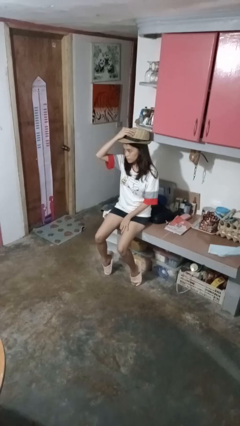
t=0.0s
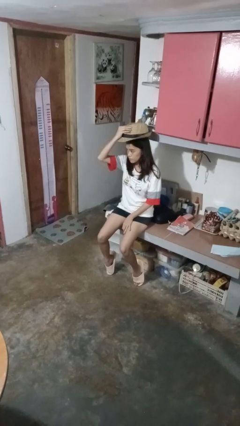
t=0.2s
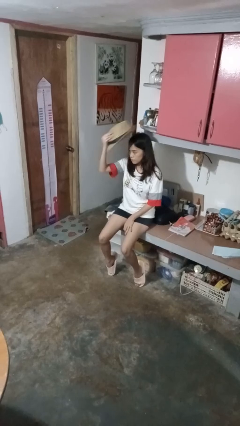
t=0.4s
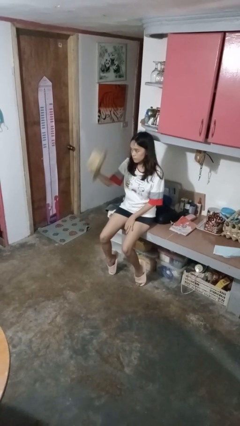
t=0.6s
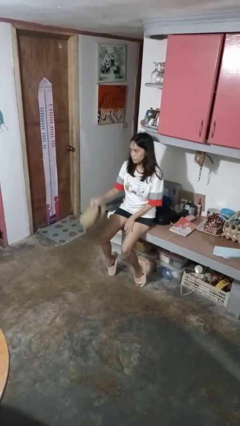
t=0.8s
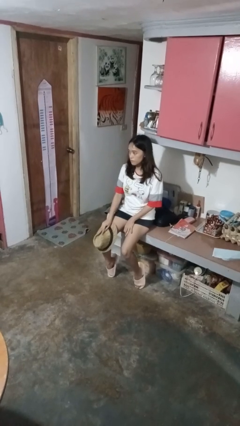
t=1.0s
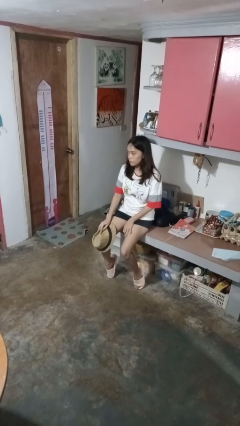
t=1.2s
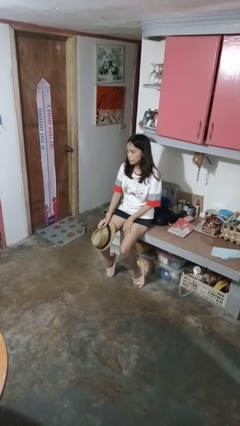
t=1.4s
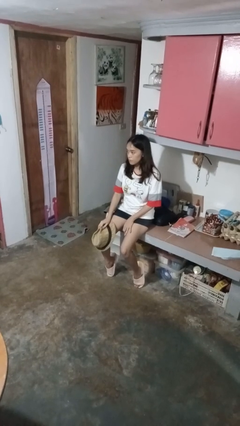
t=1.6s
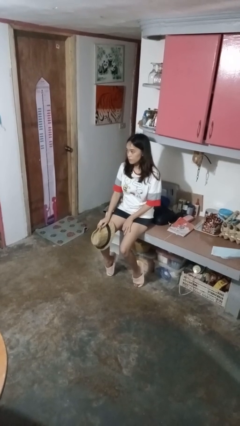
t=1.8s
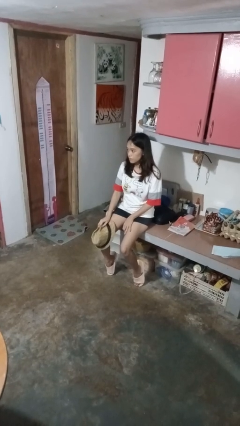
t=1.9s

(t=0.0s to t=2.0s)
person takes off hat

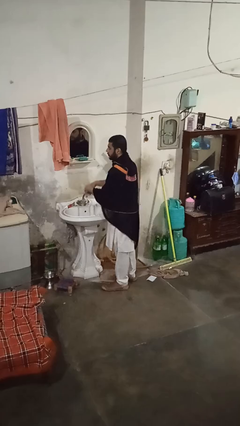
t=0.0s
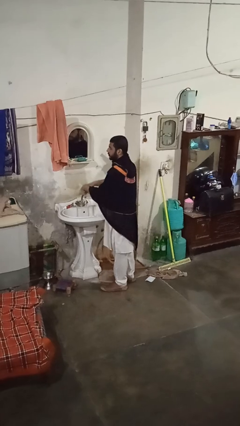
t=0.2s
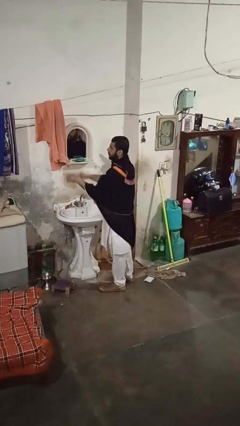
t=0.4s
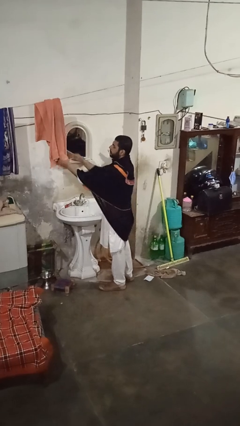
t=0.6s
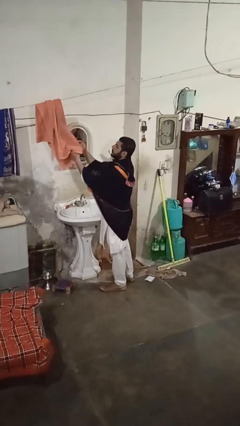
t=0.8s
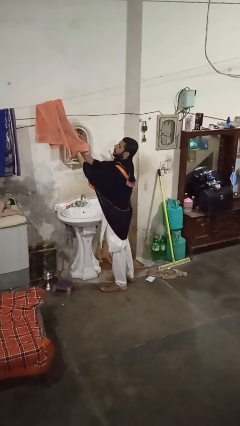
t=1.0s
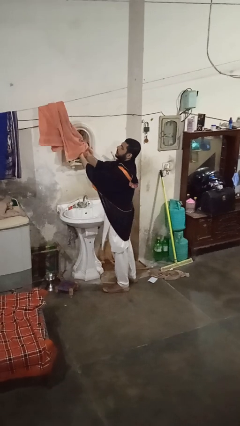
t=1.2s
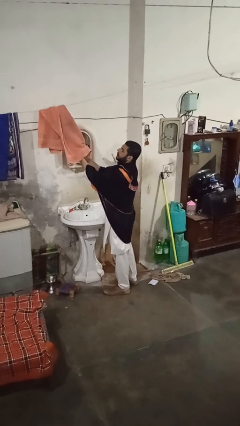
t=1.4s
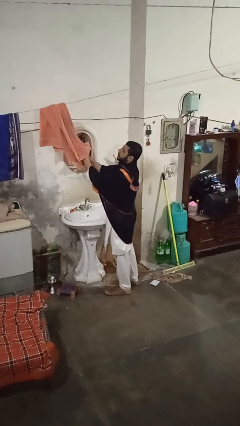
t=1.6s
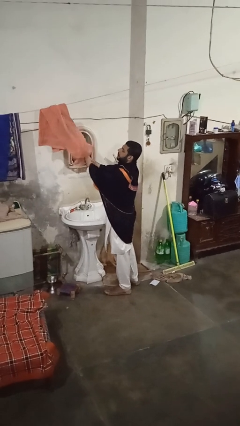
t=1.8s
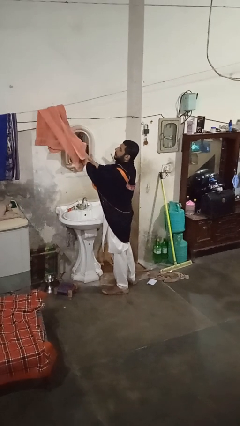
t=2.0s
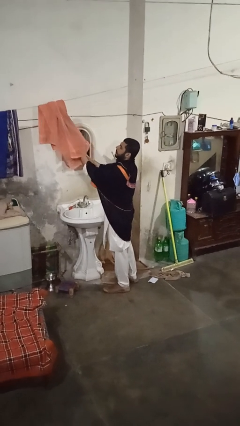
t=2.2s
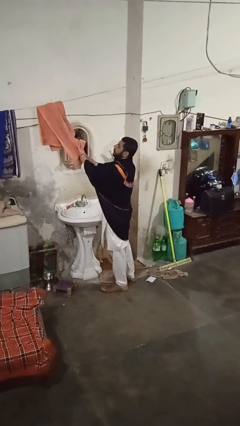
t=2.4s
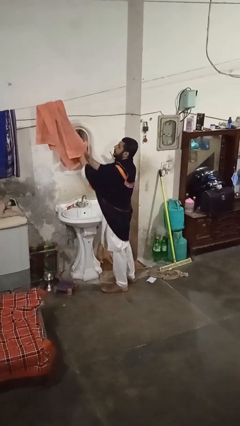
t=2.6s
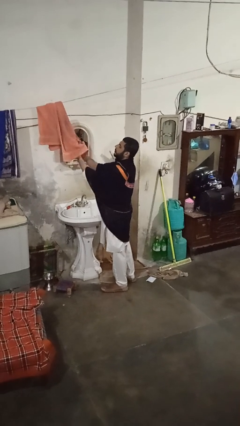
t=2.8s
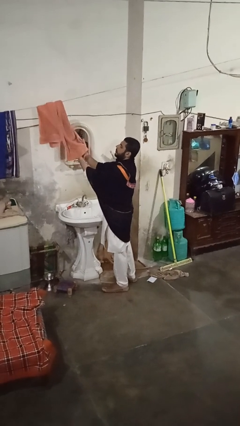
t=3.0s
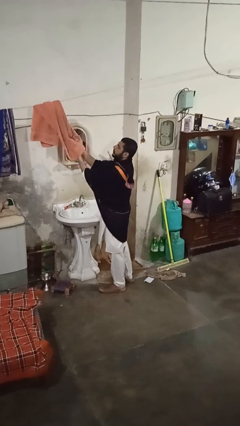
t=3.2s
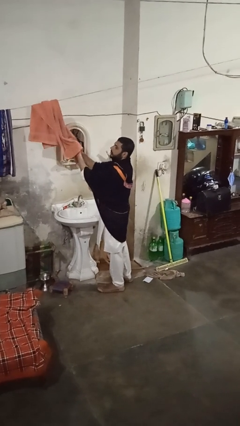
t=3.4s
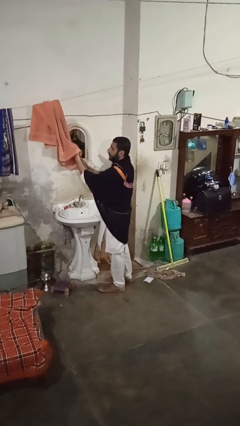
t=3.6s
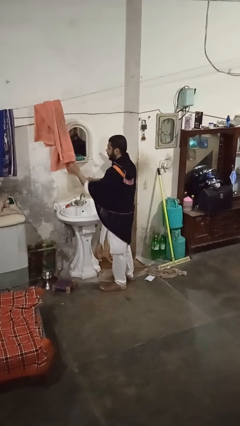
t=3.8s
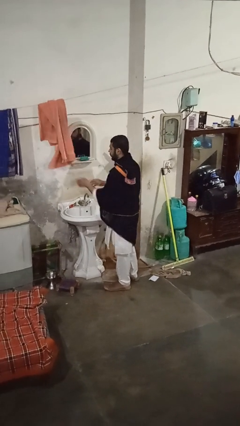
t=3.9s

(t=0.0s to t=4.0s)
person dries hands with towel

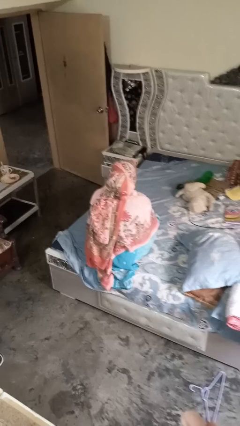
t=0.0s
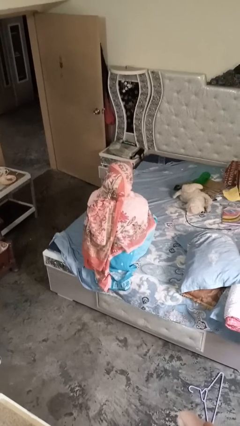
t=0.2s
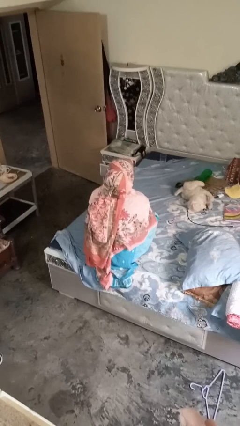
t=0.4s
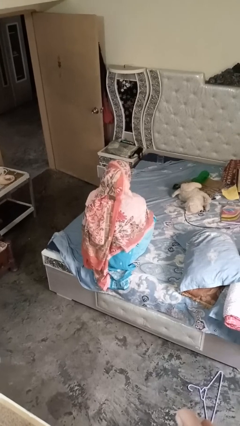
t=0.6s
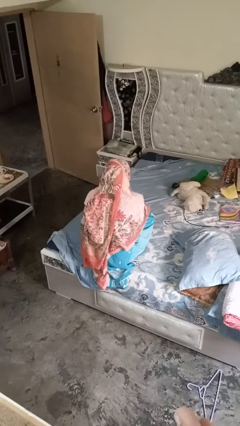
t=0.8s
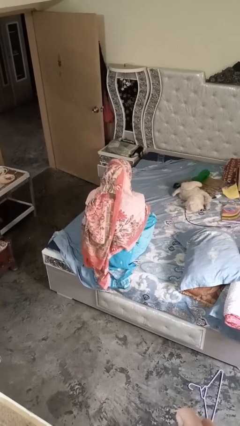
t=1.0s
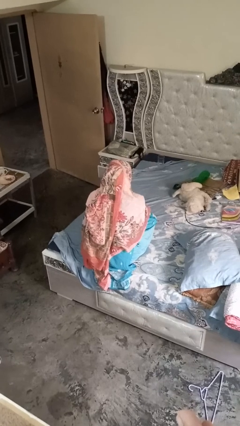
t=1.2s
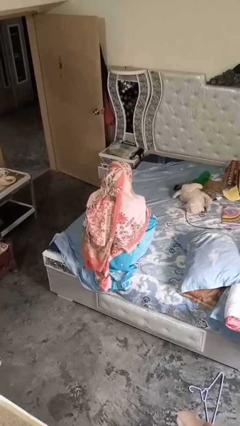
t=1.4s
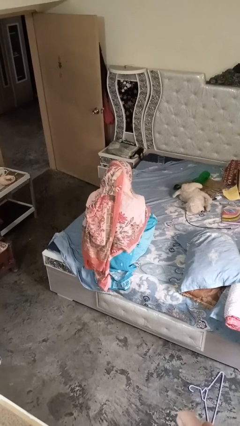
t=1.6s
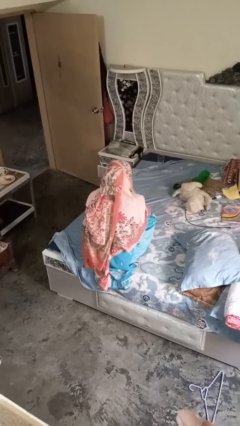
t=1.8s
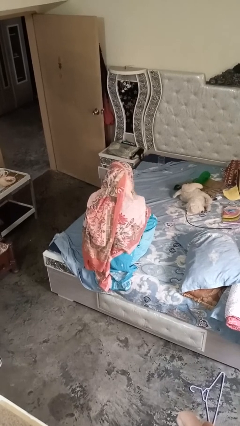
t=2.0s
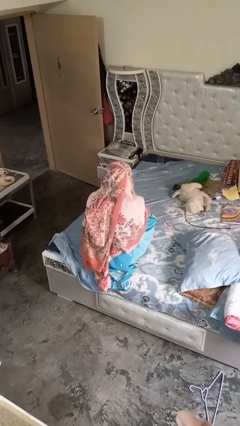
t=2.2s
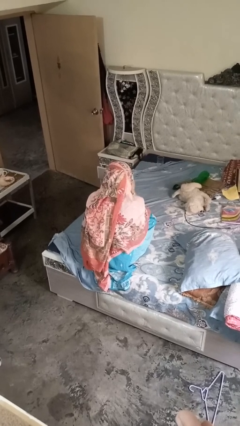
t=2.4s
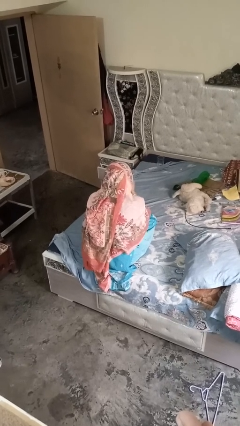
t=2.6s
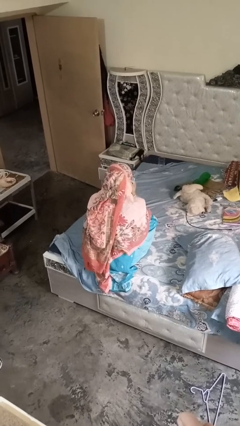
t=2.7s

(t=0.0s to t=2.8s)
person rubs foot

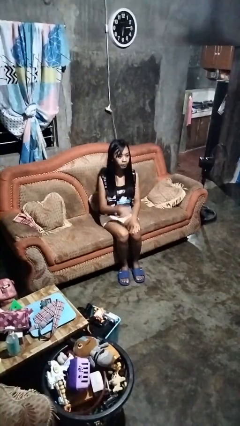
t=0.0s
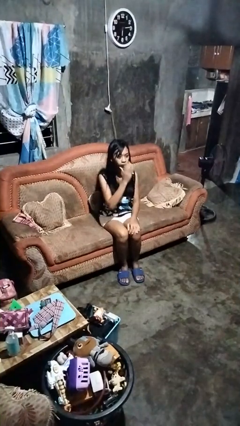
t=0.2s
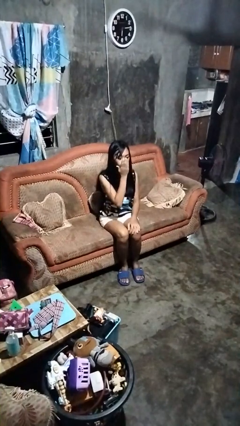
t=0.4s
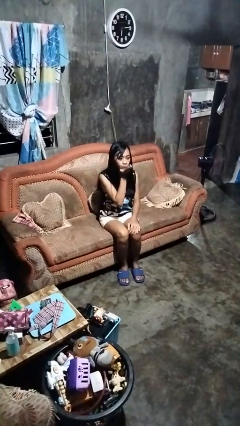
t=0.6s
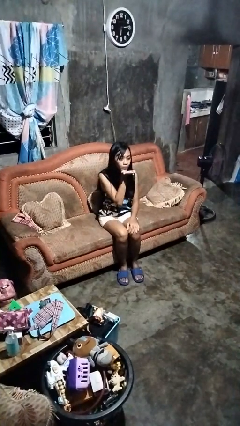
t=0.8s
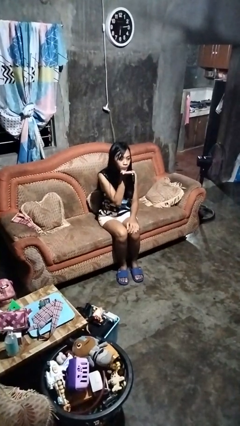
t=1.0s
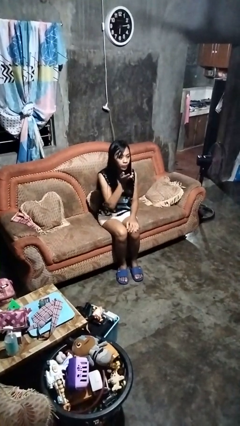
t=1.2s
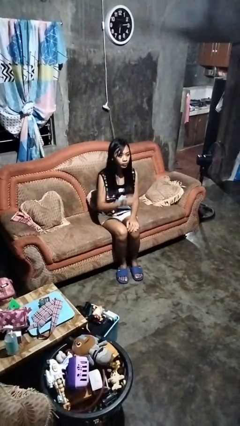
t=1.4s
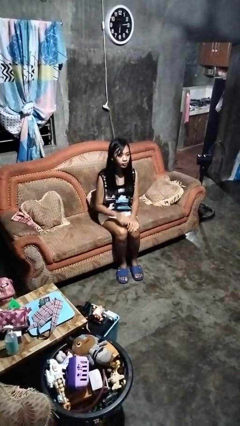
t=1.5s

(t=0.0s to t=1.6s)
person gestures blow kiss

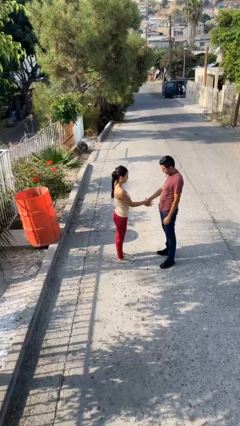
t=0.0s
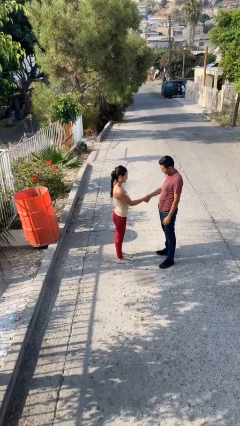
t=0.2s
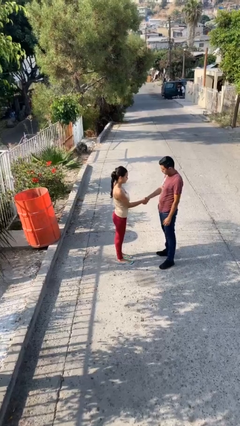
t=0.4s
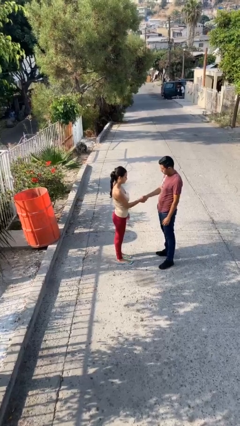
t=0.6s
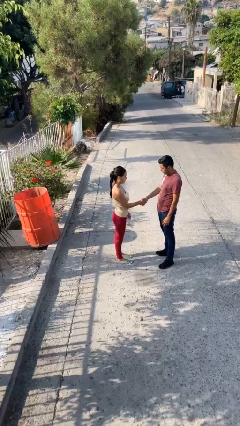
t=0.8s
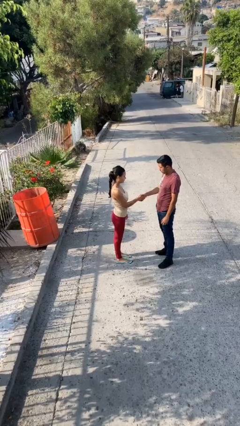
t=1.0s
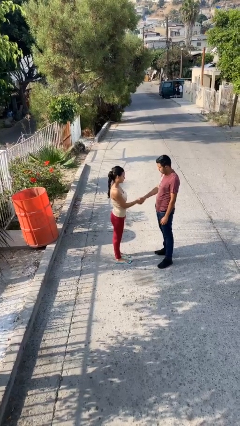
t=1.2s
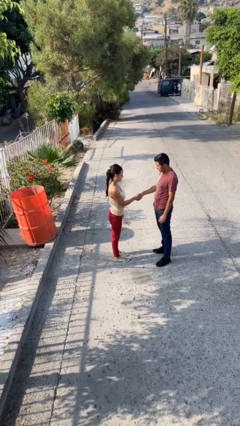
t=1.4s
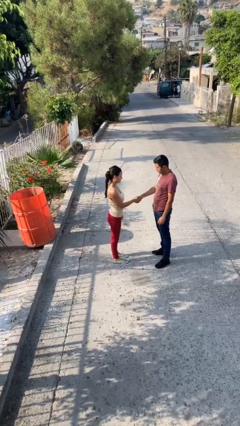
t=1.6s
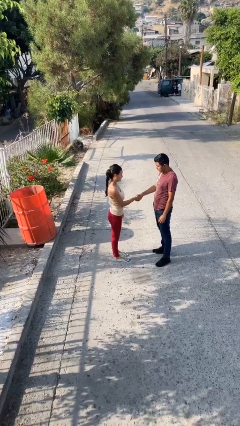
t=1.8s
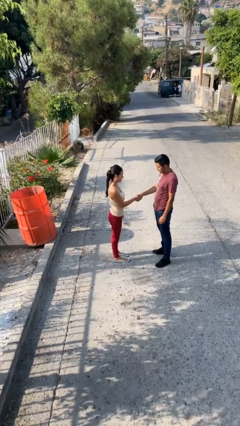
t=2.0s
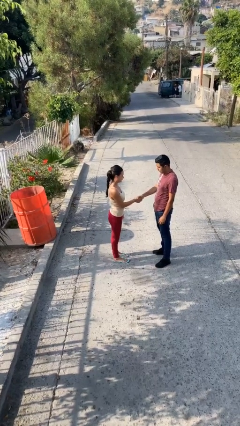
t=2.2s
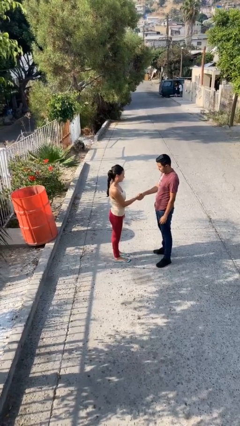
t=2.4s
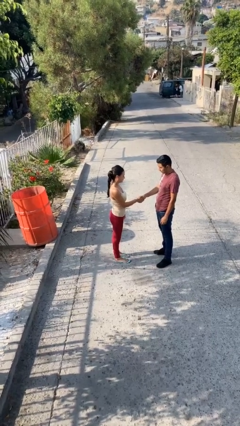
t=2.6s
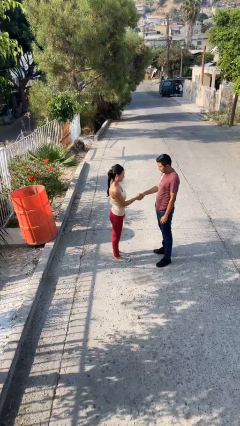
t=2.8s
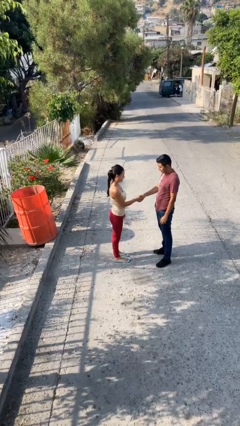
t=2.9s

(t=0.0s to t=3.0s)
person shakes hand

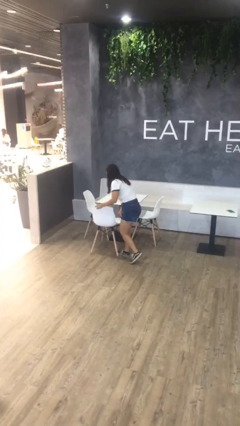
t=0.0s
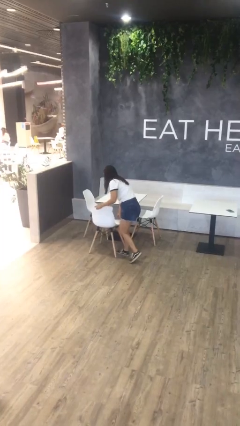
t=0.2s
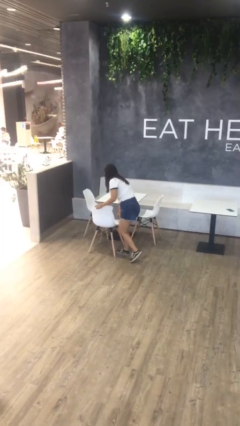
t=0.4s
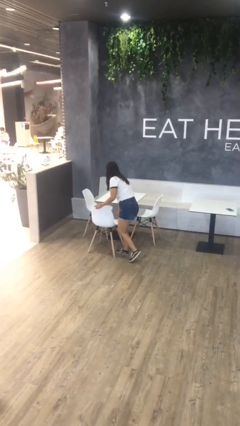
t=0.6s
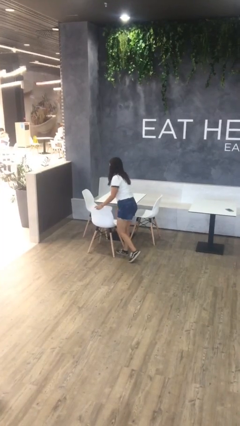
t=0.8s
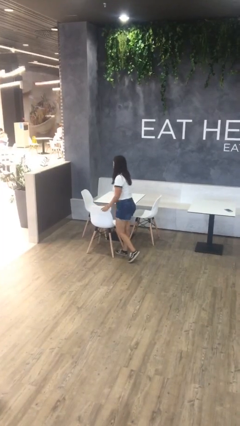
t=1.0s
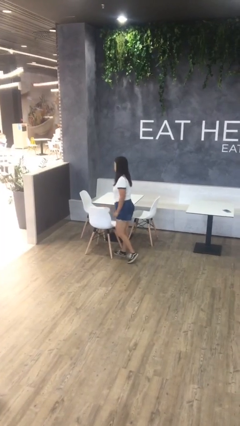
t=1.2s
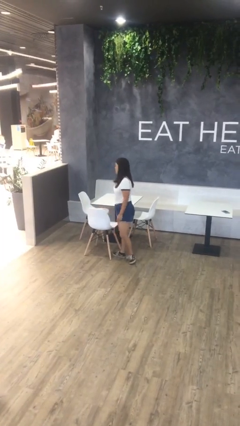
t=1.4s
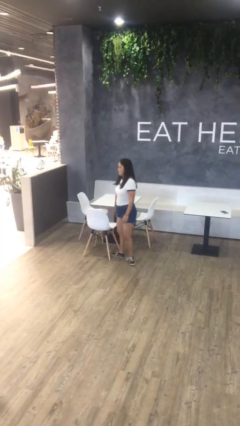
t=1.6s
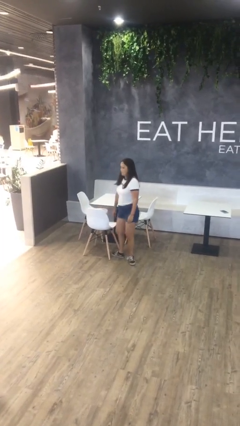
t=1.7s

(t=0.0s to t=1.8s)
person puts down object on floor

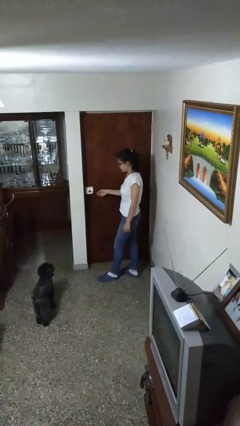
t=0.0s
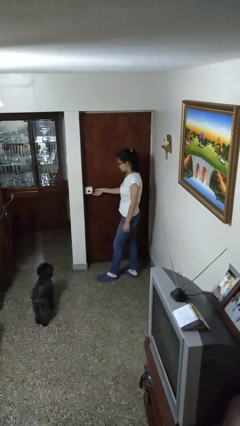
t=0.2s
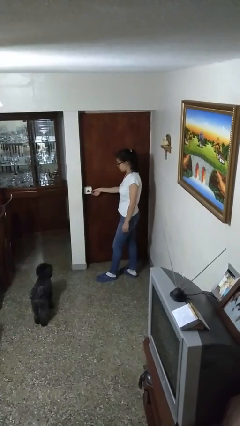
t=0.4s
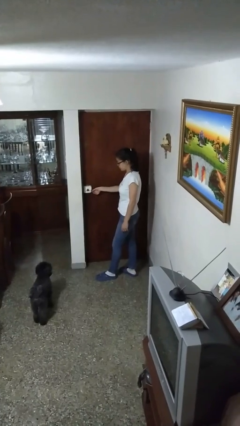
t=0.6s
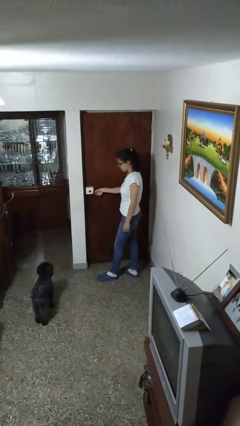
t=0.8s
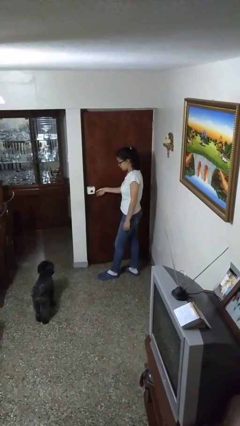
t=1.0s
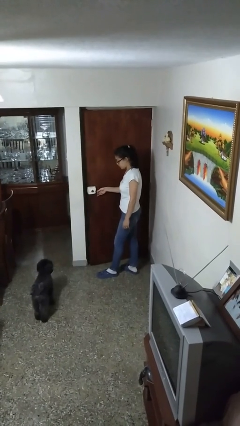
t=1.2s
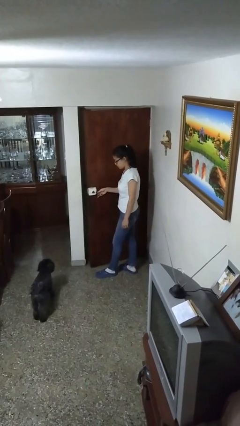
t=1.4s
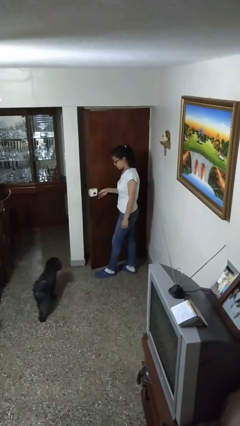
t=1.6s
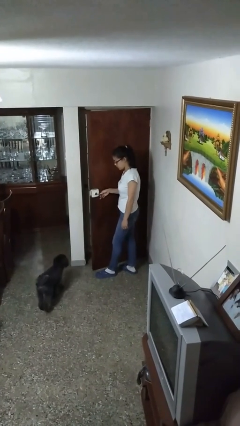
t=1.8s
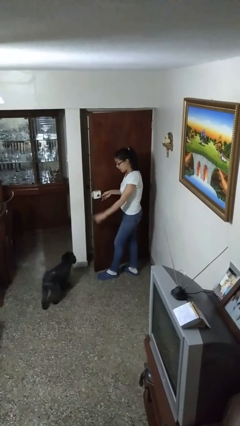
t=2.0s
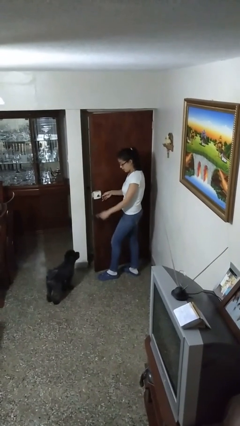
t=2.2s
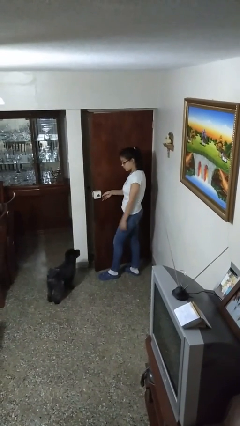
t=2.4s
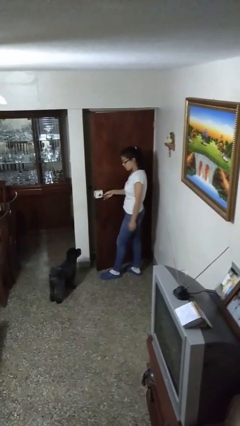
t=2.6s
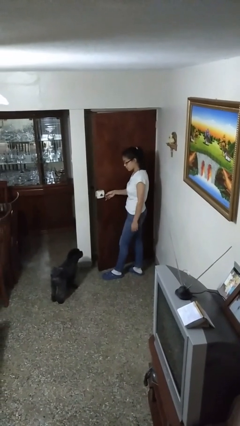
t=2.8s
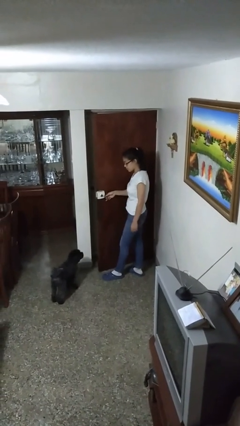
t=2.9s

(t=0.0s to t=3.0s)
person opens facility door
